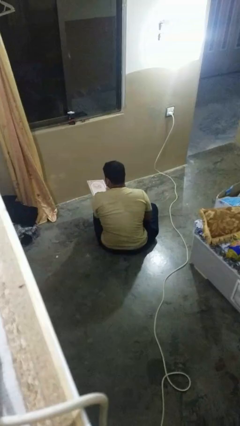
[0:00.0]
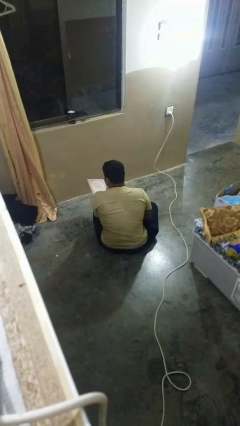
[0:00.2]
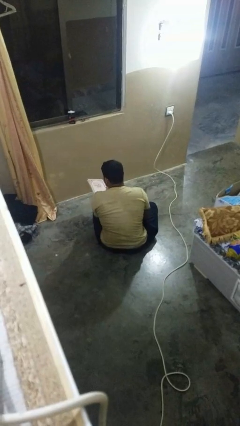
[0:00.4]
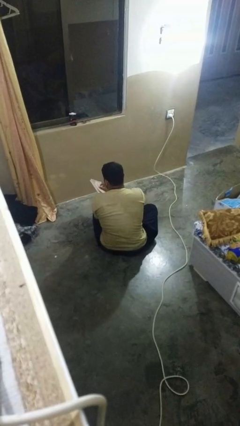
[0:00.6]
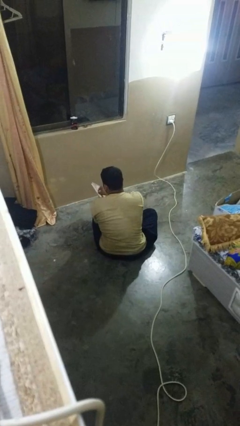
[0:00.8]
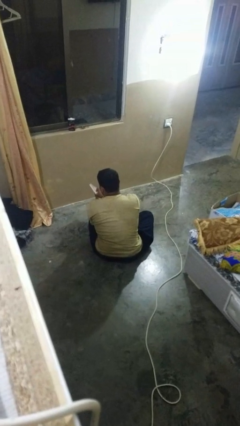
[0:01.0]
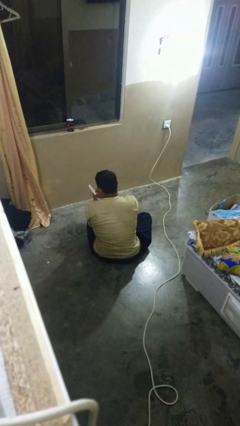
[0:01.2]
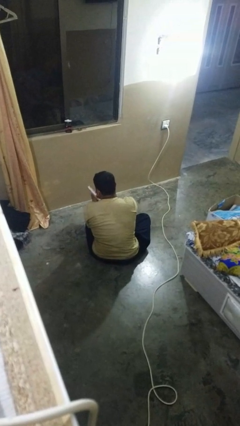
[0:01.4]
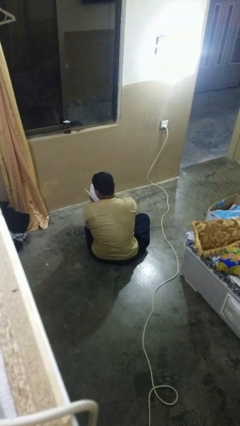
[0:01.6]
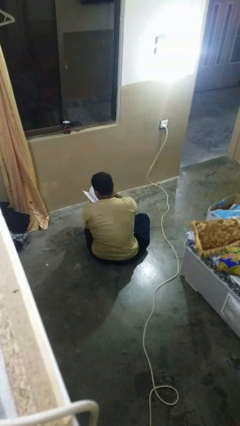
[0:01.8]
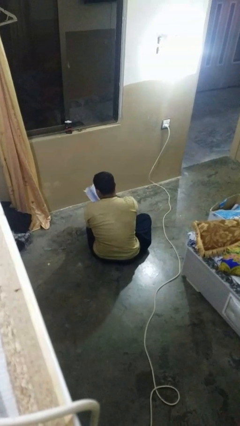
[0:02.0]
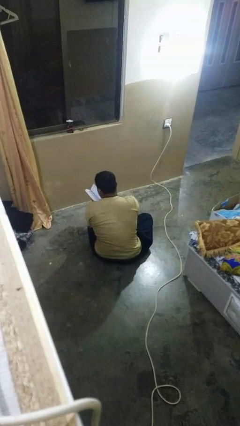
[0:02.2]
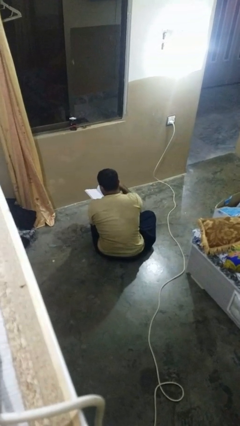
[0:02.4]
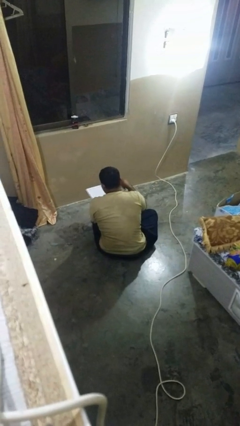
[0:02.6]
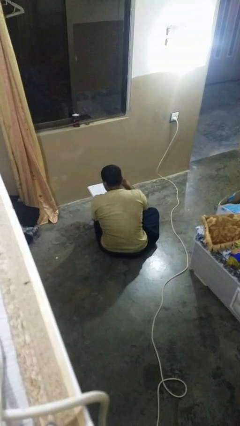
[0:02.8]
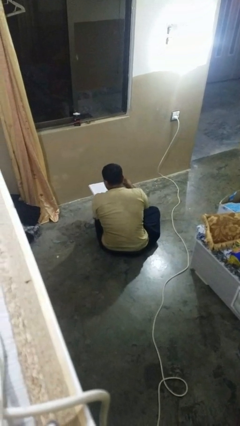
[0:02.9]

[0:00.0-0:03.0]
person reads book

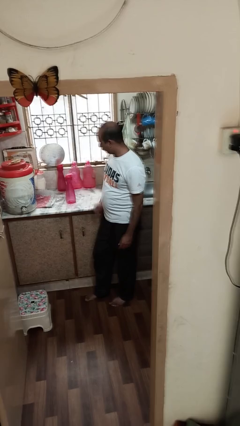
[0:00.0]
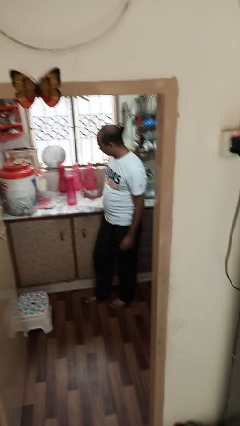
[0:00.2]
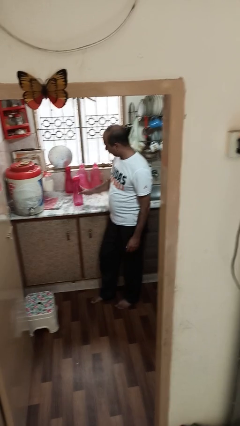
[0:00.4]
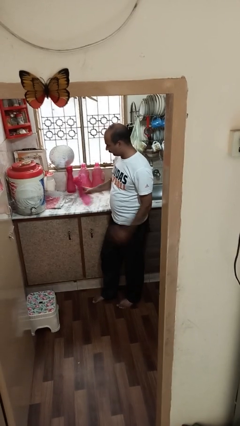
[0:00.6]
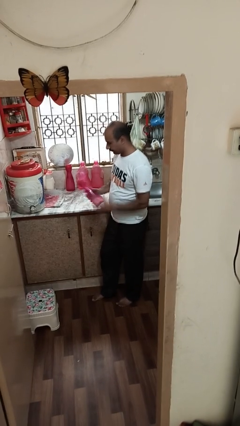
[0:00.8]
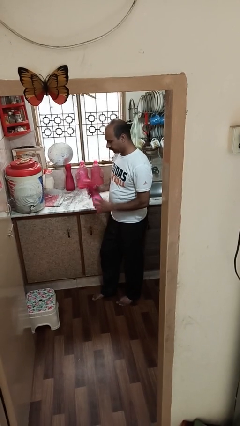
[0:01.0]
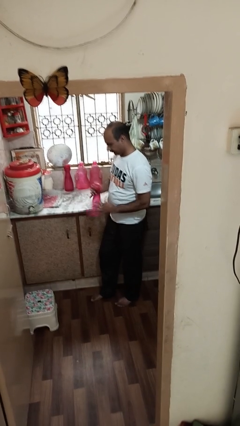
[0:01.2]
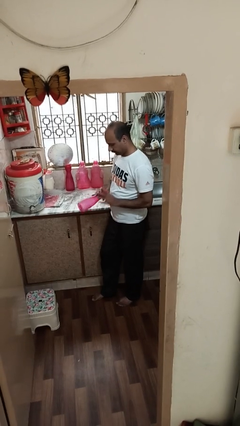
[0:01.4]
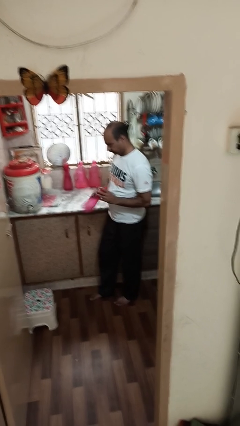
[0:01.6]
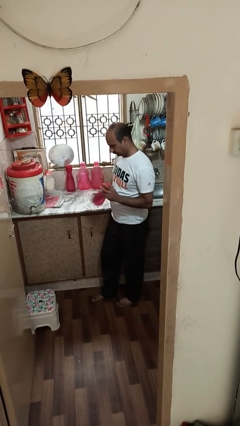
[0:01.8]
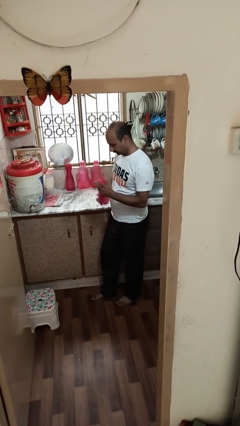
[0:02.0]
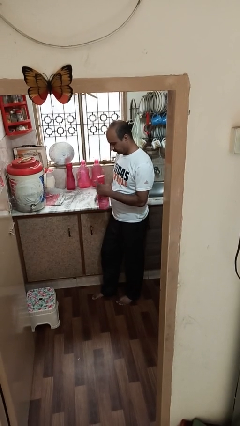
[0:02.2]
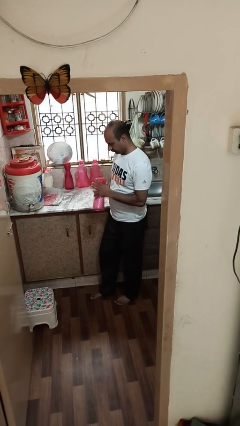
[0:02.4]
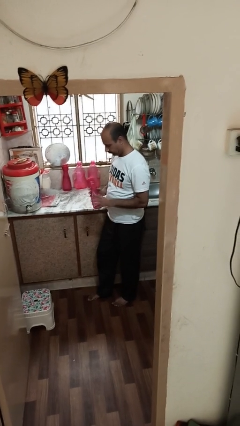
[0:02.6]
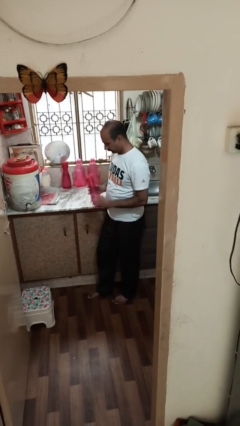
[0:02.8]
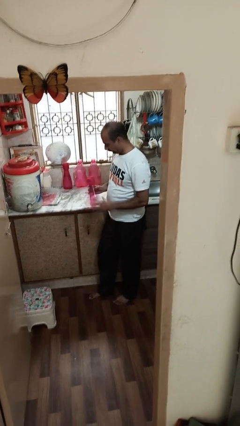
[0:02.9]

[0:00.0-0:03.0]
person picks up object from countertop

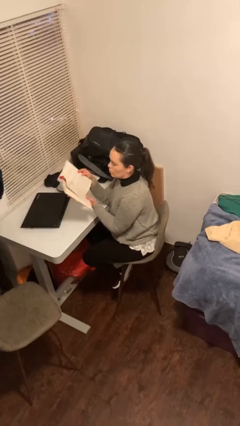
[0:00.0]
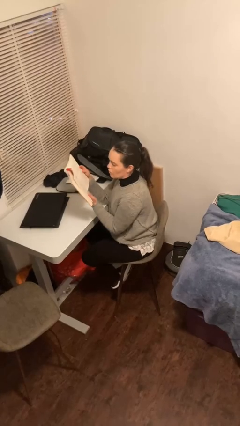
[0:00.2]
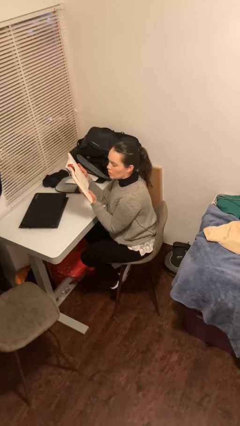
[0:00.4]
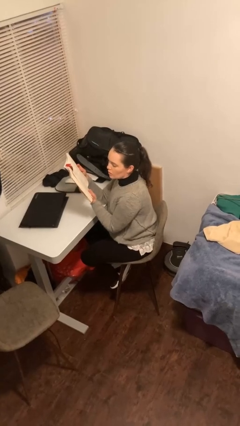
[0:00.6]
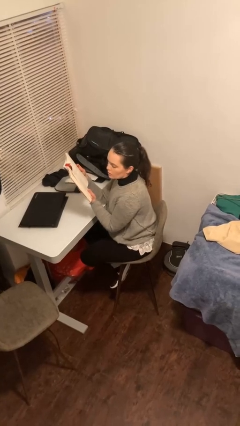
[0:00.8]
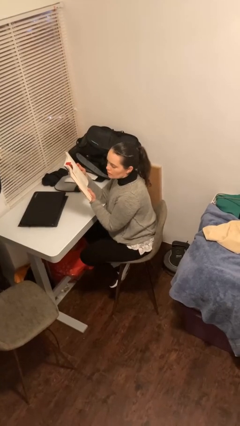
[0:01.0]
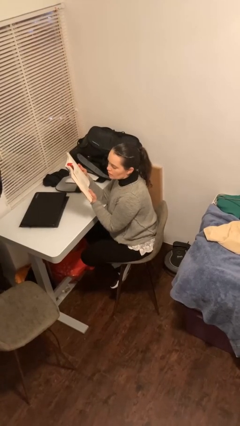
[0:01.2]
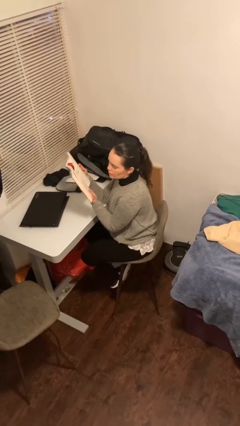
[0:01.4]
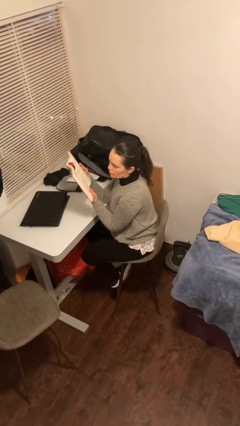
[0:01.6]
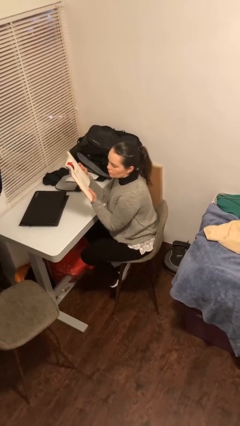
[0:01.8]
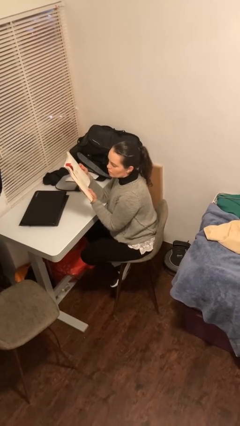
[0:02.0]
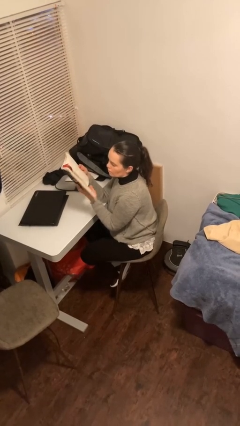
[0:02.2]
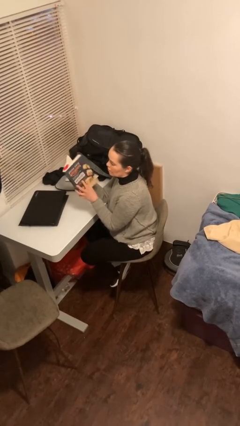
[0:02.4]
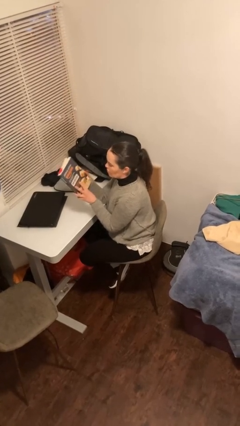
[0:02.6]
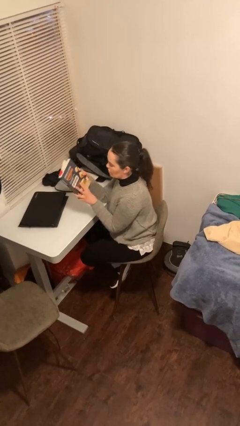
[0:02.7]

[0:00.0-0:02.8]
person reads document

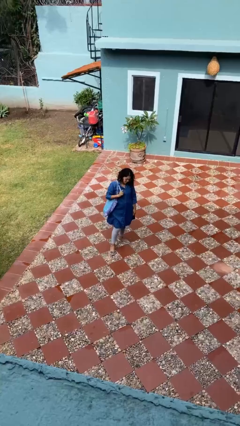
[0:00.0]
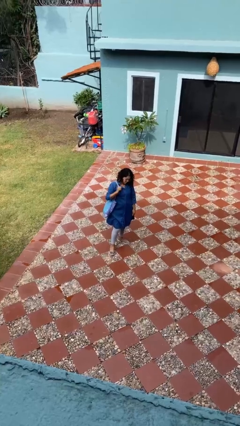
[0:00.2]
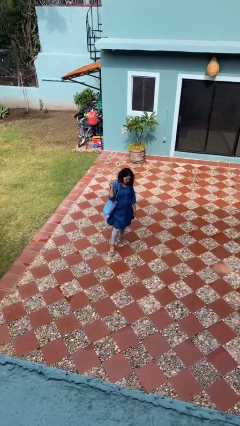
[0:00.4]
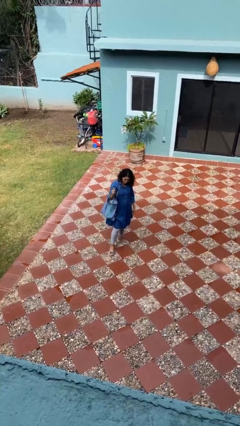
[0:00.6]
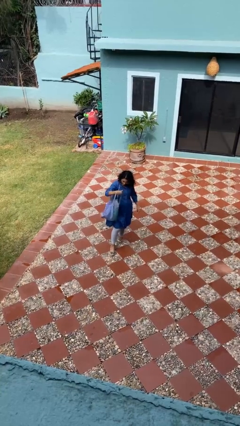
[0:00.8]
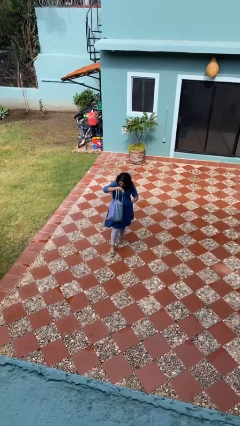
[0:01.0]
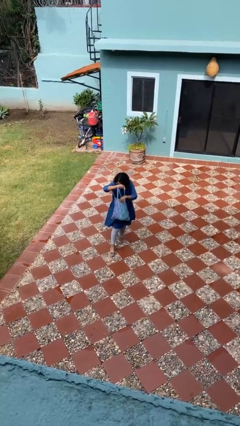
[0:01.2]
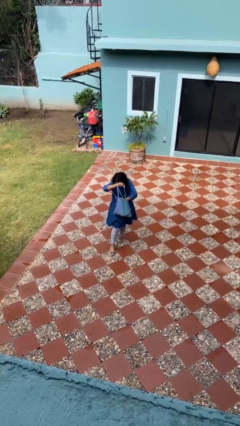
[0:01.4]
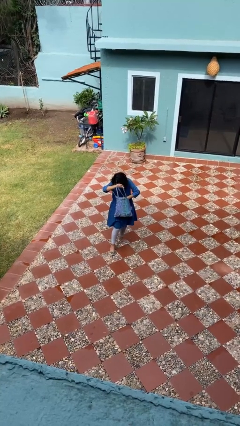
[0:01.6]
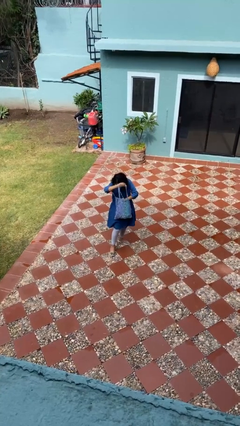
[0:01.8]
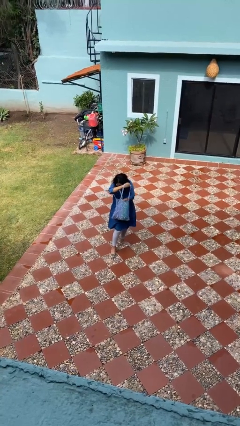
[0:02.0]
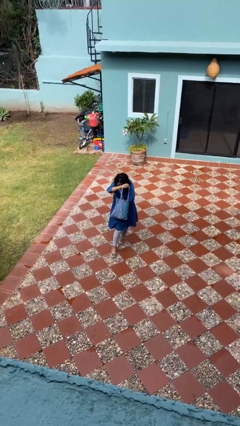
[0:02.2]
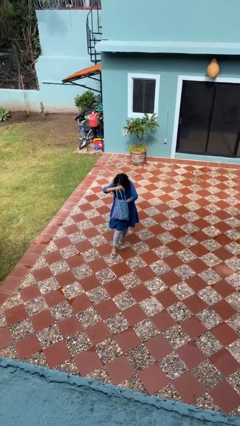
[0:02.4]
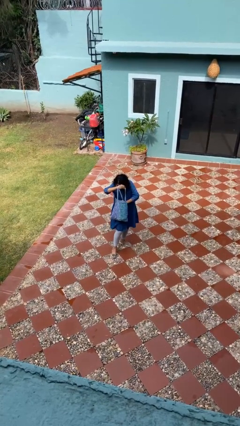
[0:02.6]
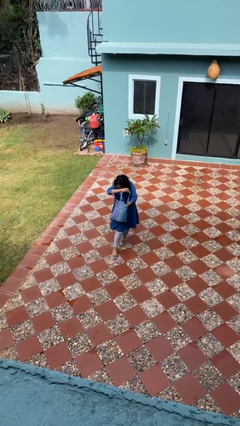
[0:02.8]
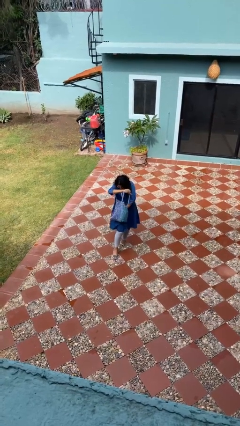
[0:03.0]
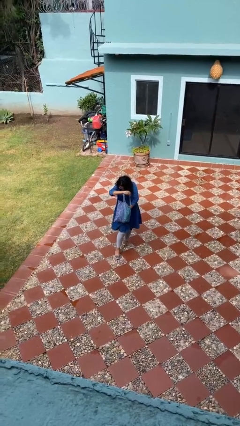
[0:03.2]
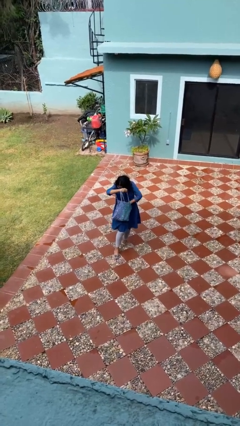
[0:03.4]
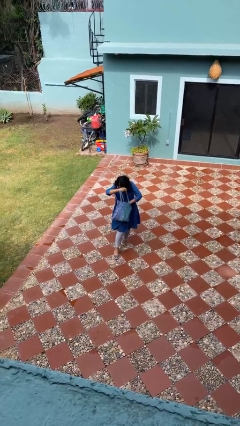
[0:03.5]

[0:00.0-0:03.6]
person searches in purse

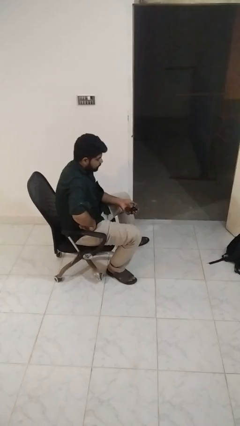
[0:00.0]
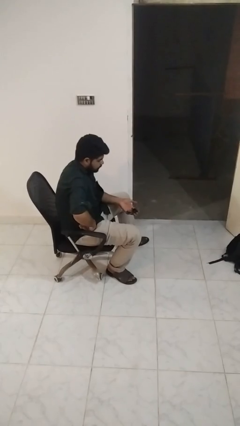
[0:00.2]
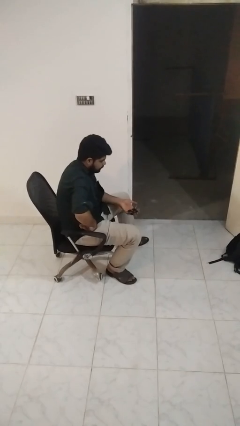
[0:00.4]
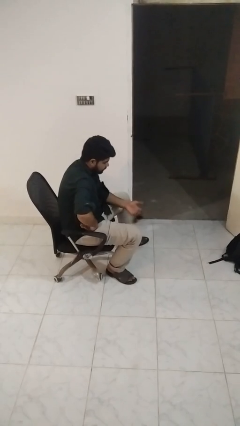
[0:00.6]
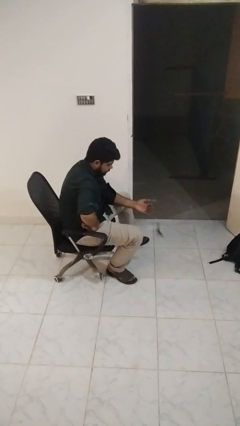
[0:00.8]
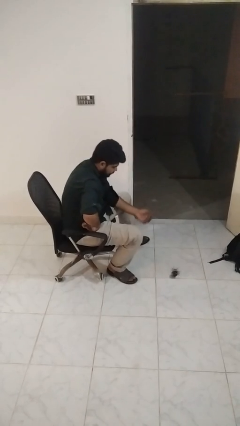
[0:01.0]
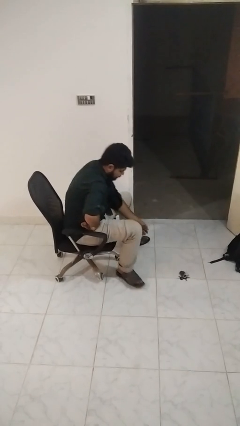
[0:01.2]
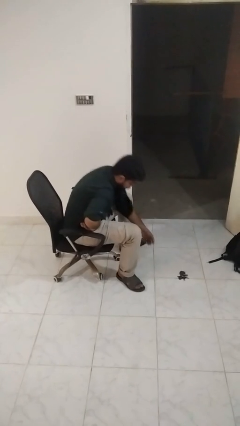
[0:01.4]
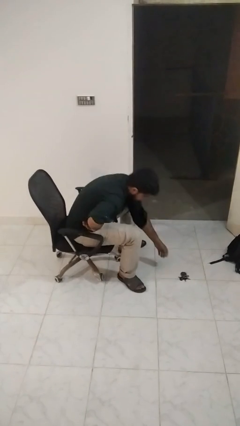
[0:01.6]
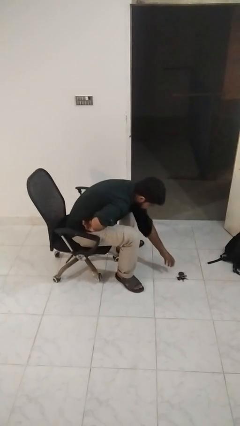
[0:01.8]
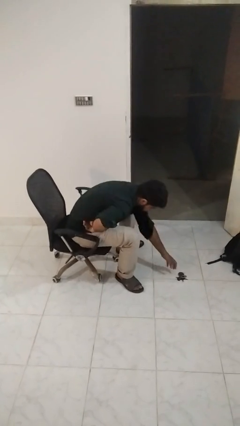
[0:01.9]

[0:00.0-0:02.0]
person drops object

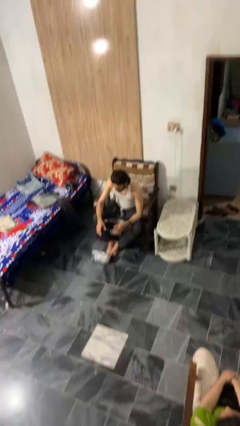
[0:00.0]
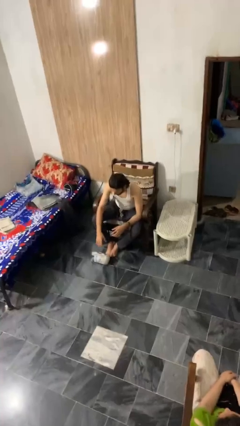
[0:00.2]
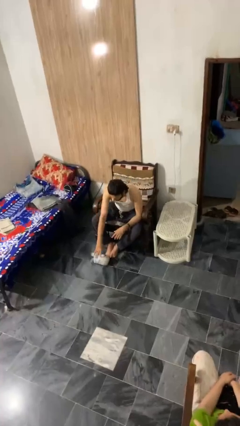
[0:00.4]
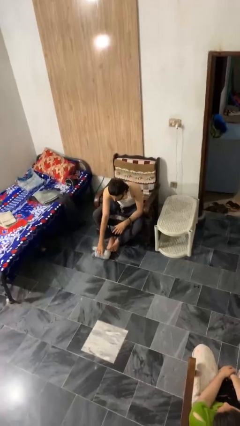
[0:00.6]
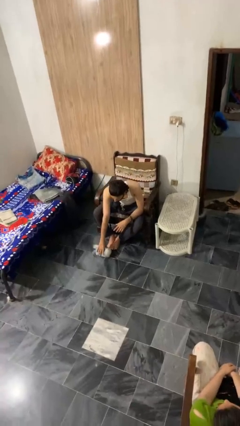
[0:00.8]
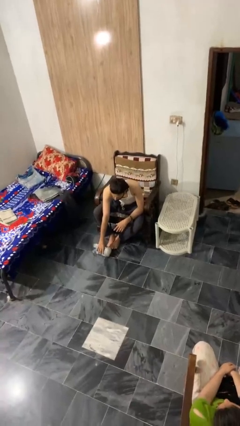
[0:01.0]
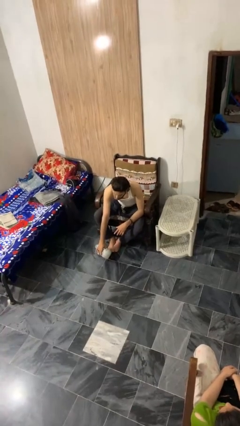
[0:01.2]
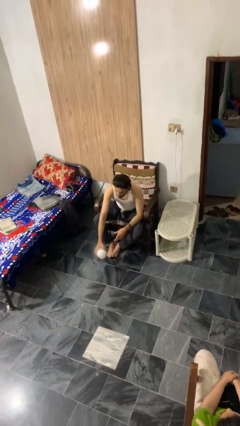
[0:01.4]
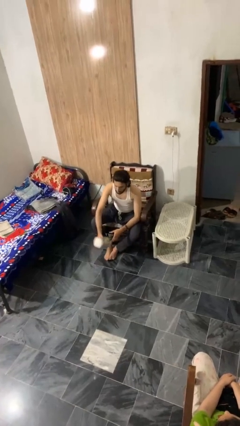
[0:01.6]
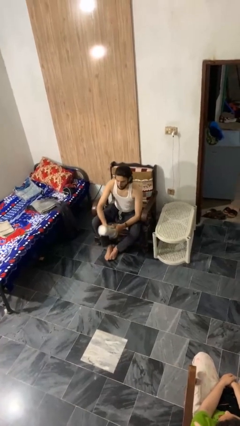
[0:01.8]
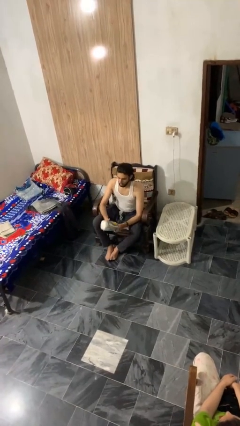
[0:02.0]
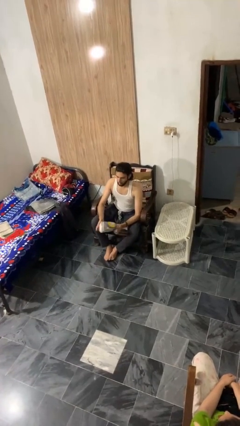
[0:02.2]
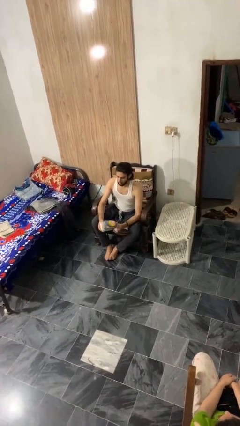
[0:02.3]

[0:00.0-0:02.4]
person picks up object from floor
